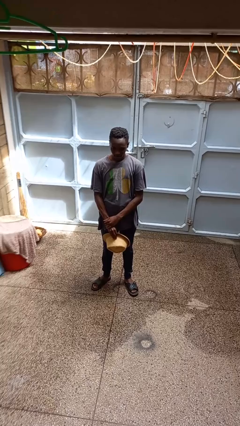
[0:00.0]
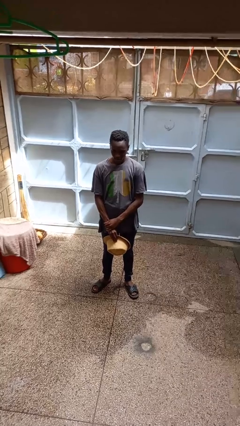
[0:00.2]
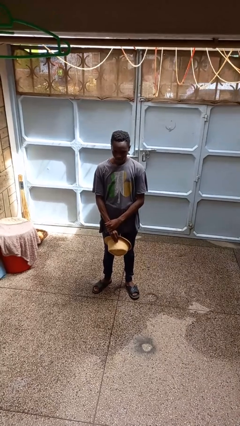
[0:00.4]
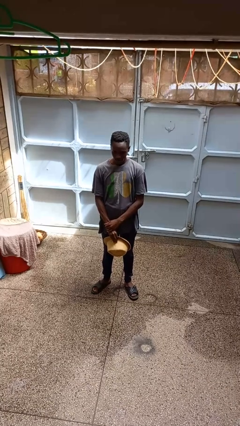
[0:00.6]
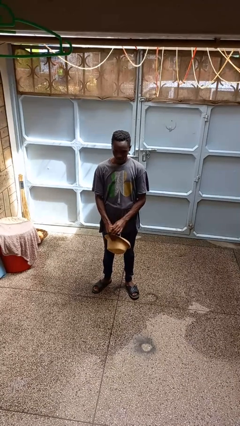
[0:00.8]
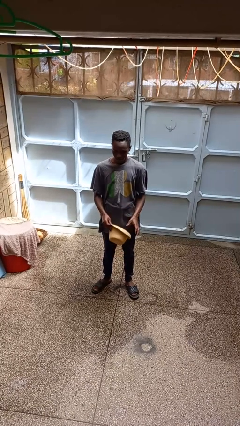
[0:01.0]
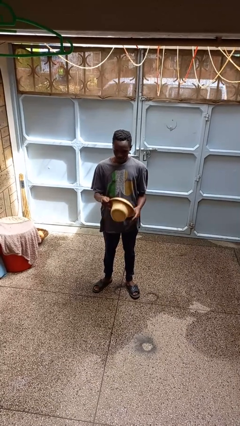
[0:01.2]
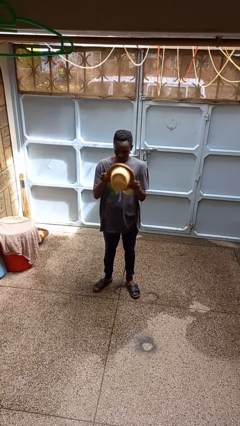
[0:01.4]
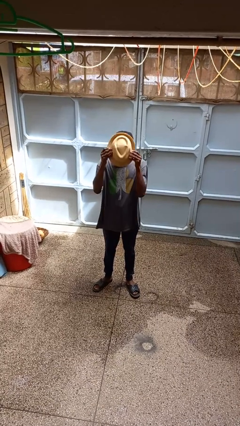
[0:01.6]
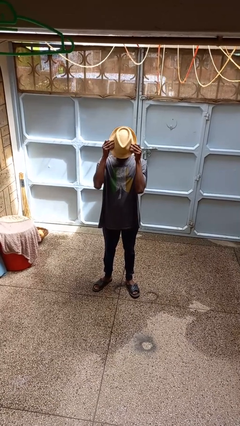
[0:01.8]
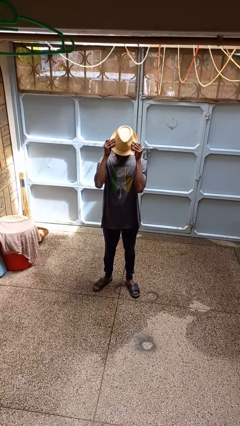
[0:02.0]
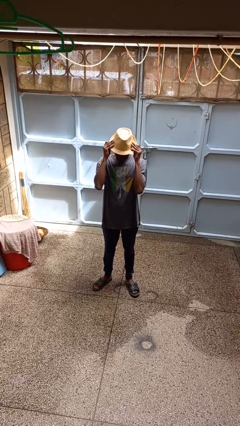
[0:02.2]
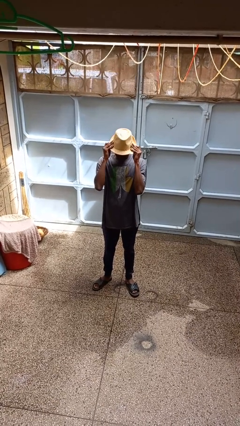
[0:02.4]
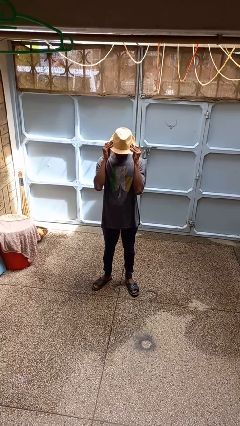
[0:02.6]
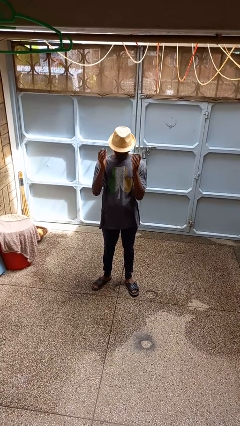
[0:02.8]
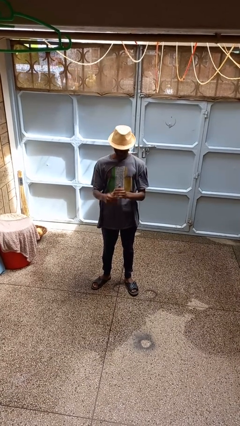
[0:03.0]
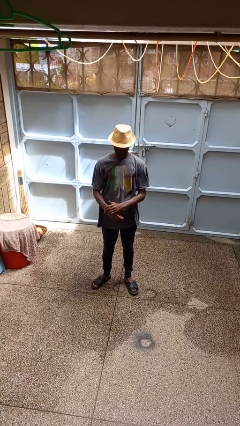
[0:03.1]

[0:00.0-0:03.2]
person puts on hat

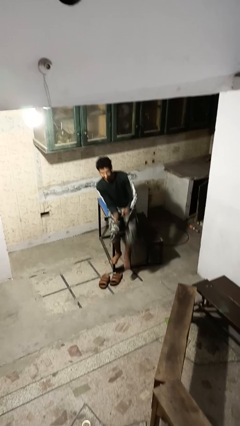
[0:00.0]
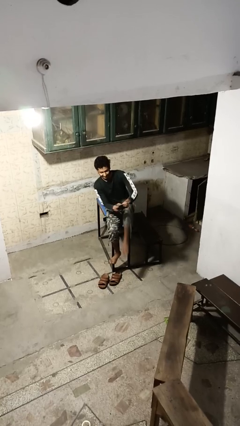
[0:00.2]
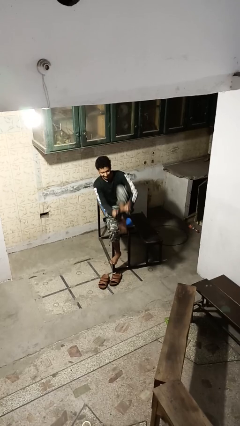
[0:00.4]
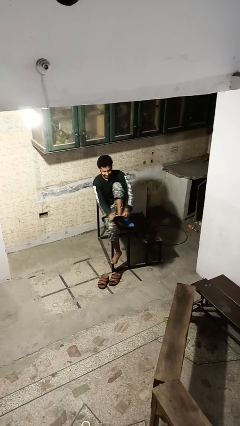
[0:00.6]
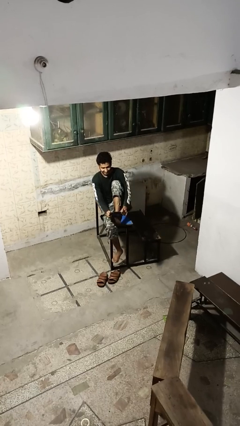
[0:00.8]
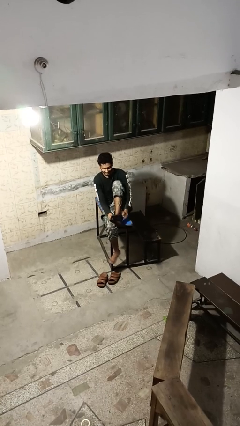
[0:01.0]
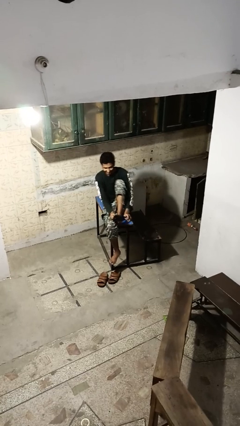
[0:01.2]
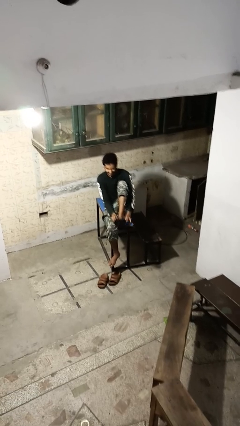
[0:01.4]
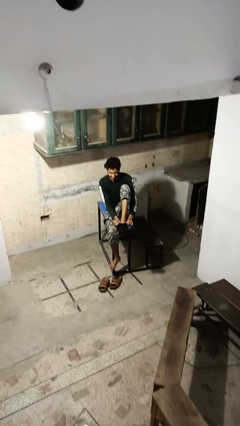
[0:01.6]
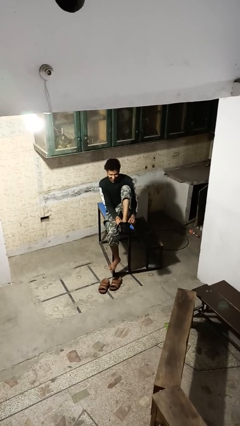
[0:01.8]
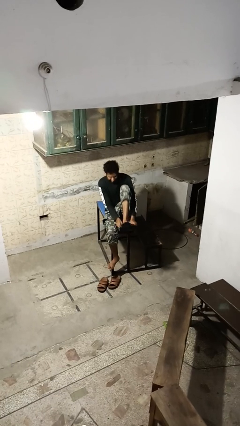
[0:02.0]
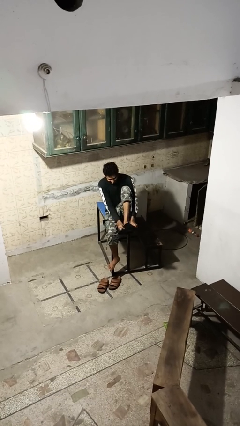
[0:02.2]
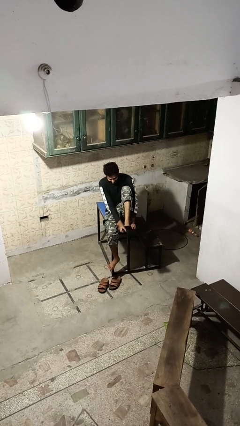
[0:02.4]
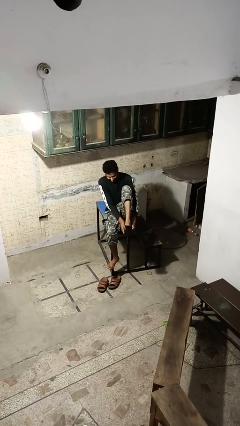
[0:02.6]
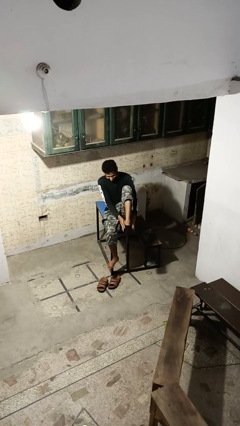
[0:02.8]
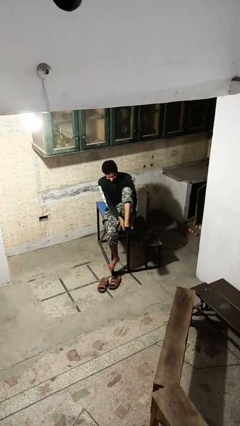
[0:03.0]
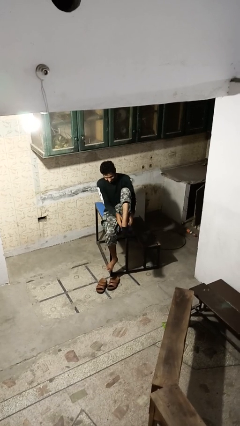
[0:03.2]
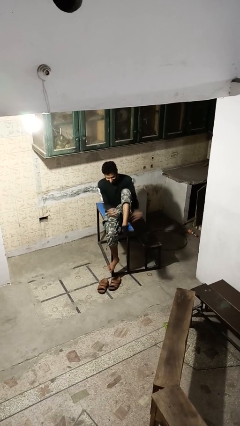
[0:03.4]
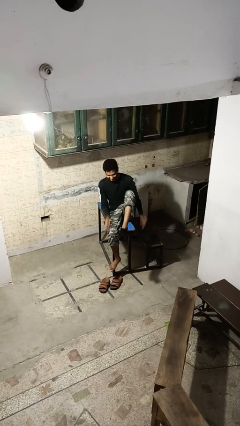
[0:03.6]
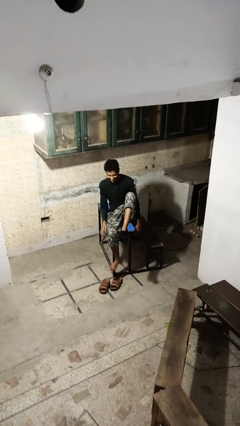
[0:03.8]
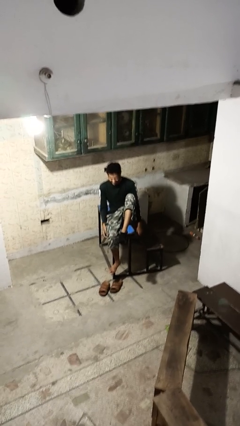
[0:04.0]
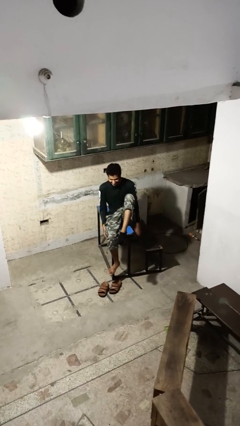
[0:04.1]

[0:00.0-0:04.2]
person puts on socks

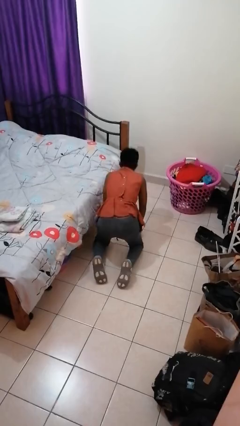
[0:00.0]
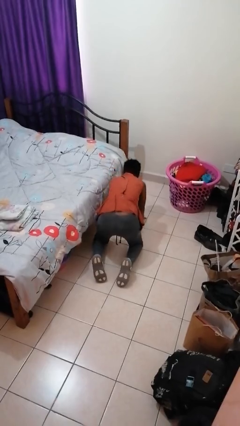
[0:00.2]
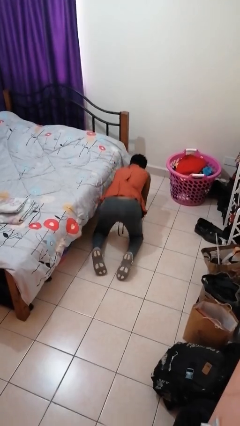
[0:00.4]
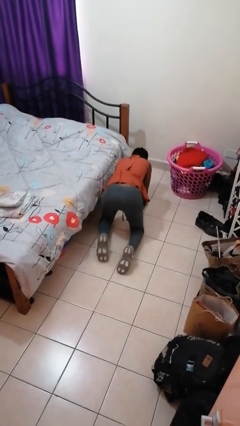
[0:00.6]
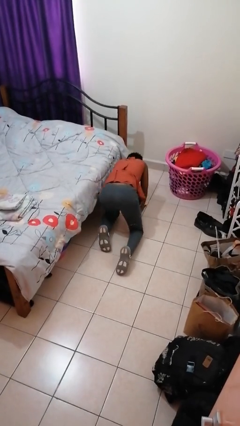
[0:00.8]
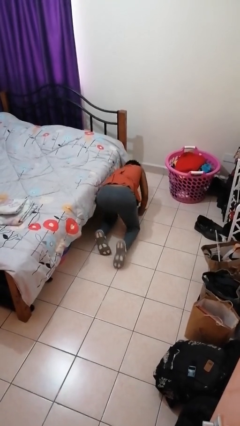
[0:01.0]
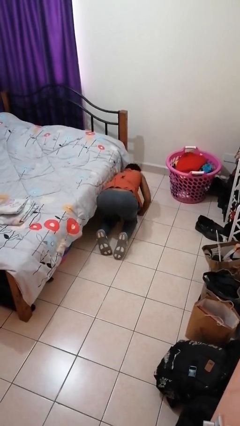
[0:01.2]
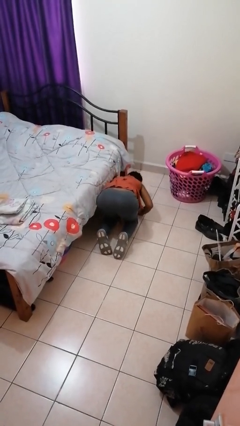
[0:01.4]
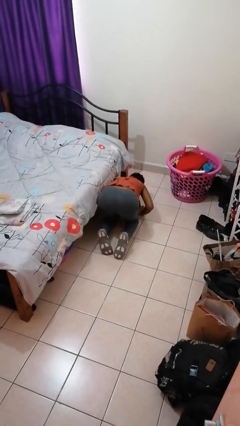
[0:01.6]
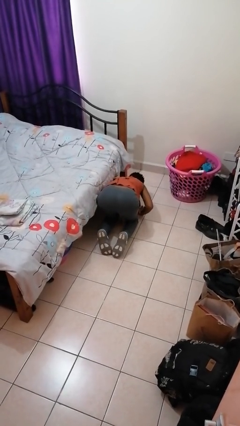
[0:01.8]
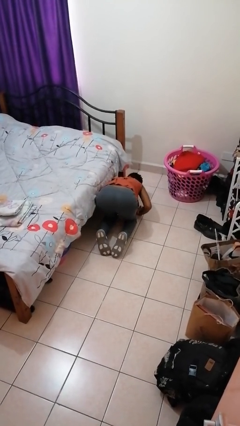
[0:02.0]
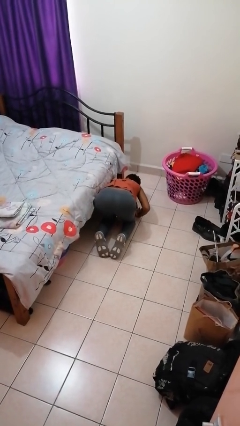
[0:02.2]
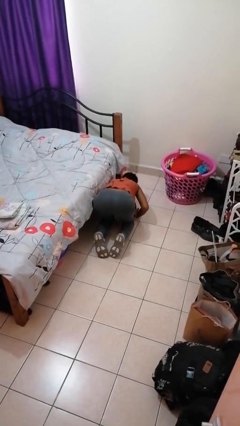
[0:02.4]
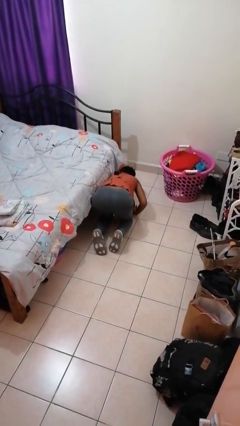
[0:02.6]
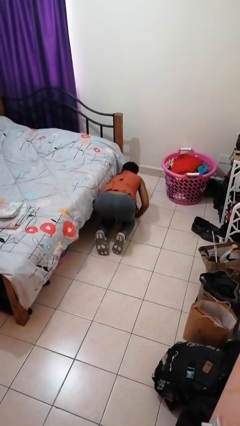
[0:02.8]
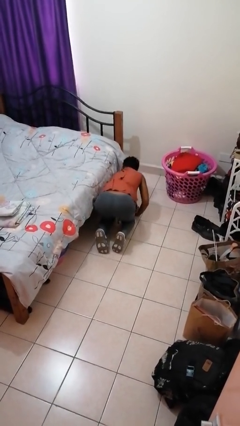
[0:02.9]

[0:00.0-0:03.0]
person searches under bed

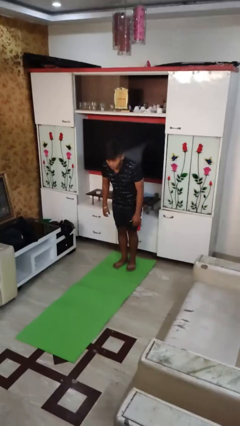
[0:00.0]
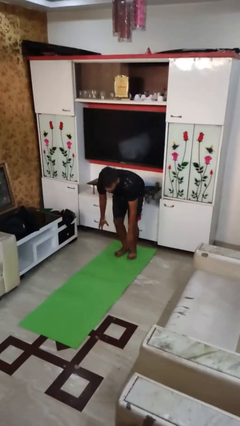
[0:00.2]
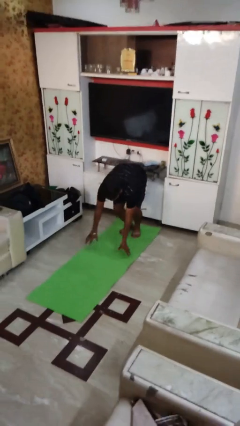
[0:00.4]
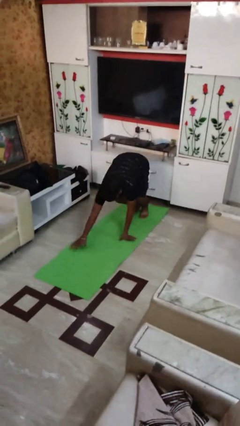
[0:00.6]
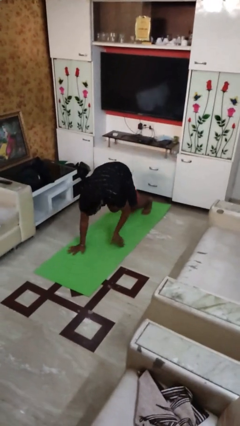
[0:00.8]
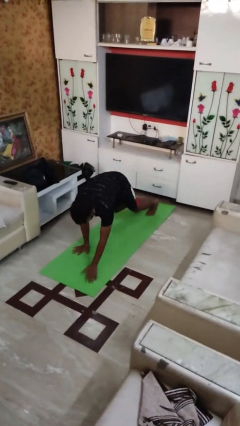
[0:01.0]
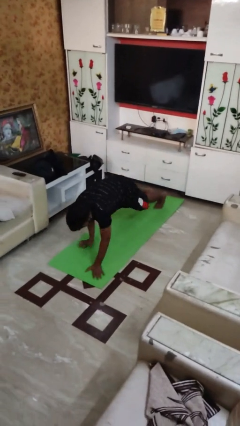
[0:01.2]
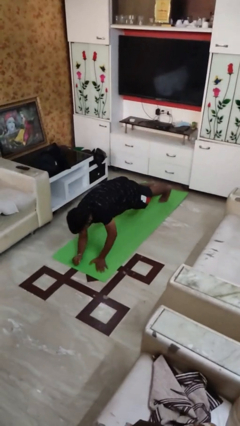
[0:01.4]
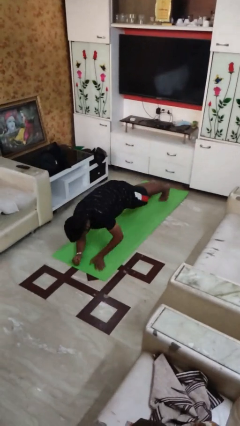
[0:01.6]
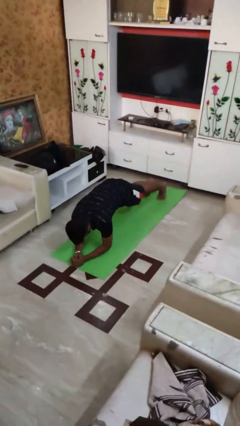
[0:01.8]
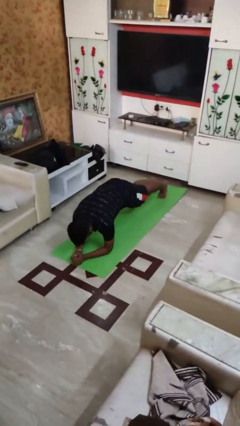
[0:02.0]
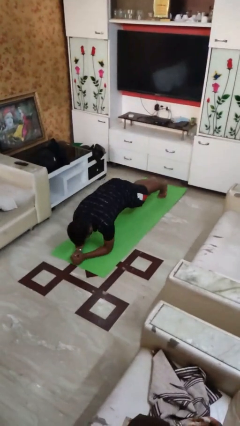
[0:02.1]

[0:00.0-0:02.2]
person exercises with plank

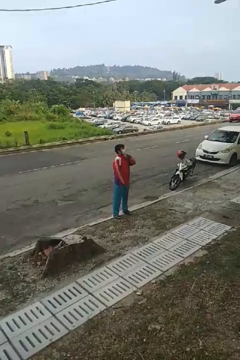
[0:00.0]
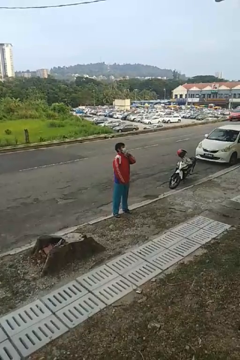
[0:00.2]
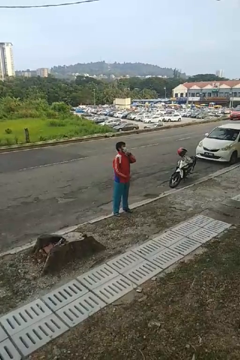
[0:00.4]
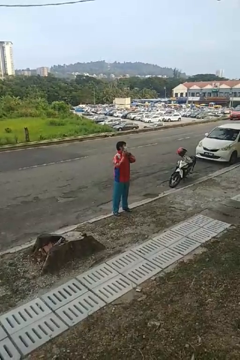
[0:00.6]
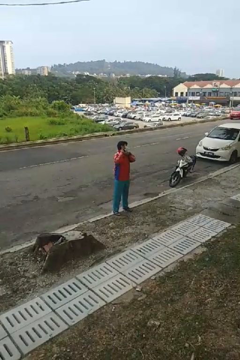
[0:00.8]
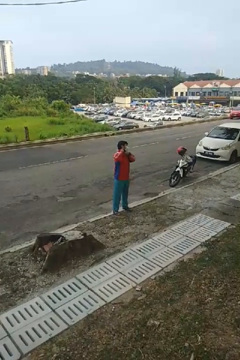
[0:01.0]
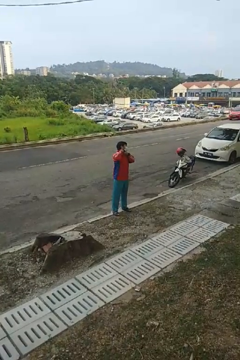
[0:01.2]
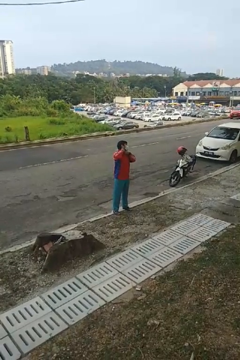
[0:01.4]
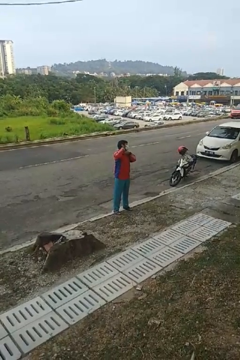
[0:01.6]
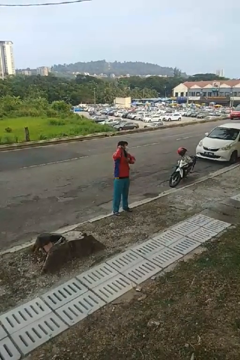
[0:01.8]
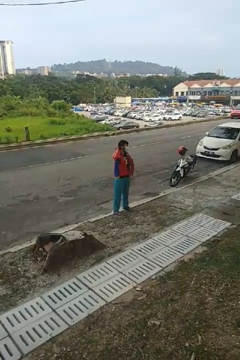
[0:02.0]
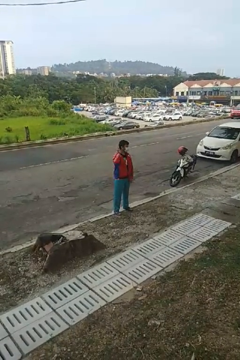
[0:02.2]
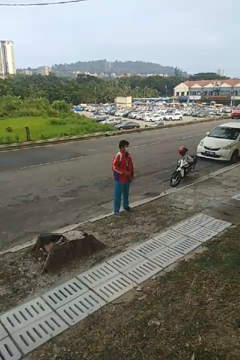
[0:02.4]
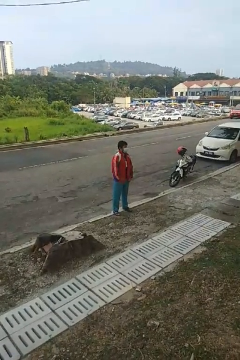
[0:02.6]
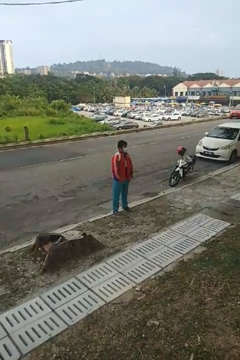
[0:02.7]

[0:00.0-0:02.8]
person unzips jacket

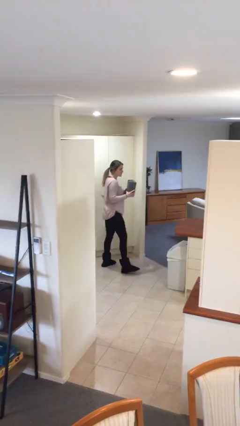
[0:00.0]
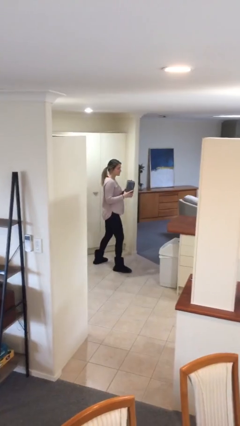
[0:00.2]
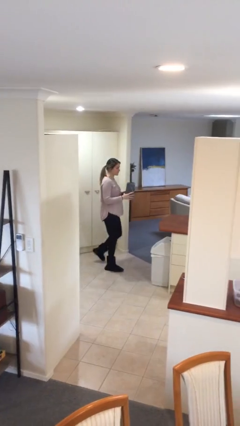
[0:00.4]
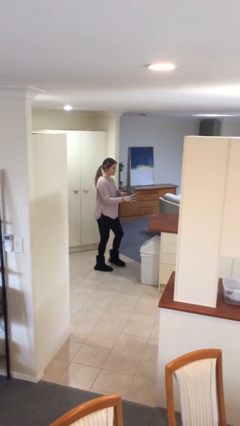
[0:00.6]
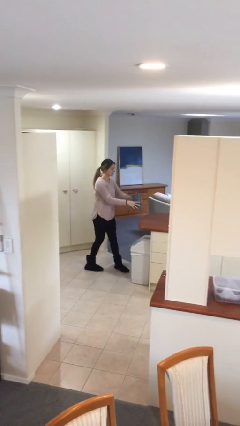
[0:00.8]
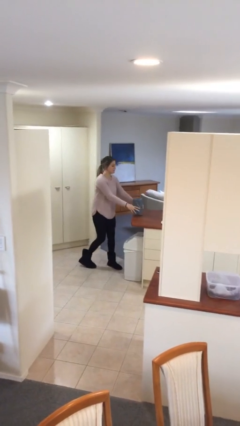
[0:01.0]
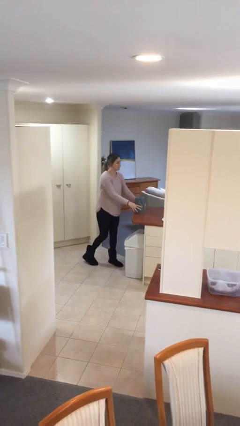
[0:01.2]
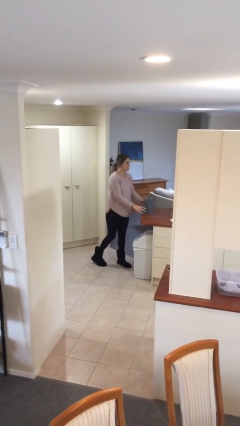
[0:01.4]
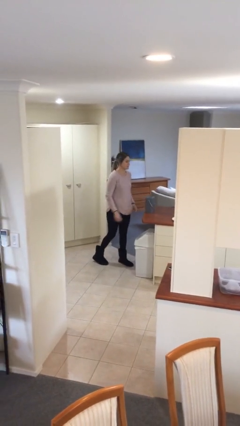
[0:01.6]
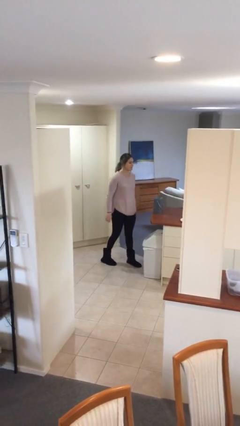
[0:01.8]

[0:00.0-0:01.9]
person puts down object on table

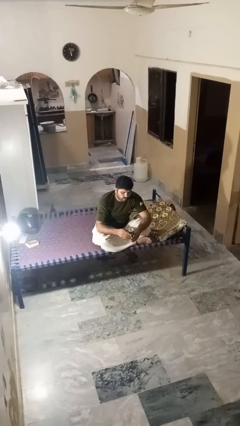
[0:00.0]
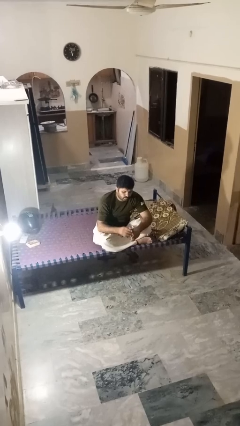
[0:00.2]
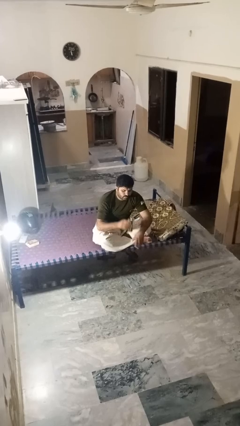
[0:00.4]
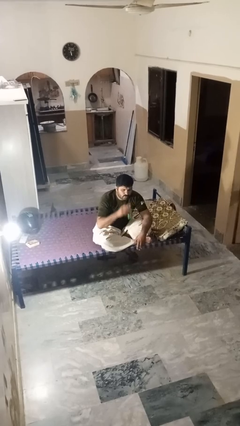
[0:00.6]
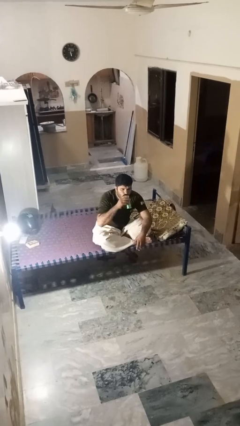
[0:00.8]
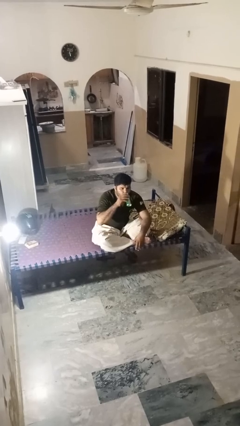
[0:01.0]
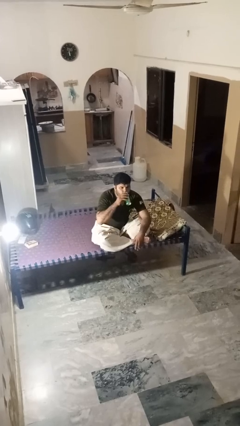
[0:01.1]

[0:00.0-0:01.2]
person drinks from beverage can
